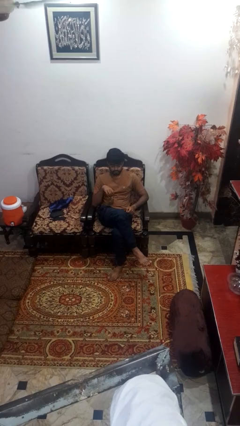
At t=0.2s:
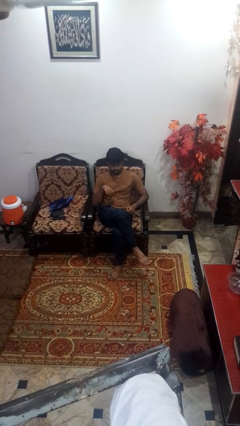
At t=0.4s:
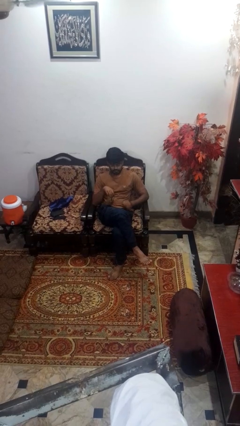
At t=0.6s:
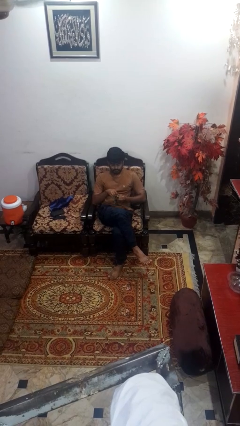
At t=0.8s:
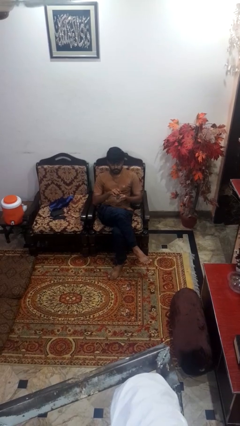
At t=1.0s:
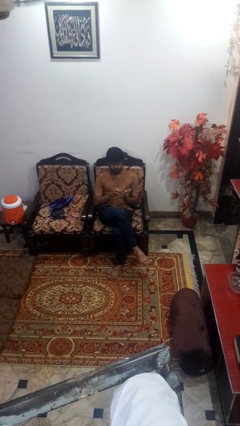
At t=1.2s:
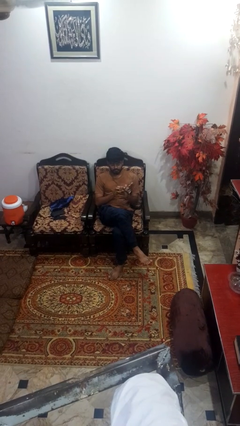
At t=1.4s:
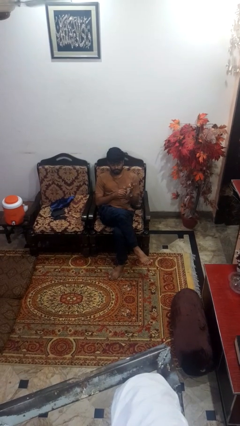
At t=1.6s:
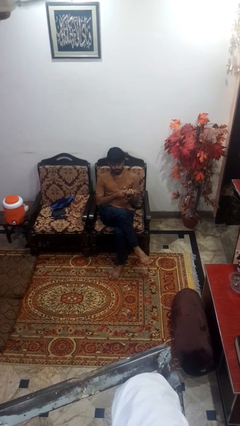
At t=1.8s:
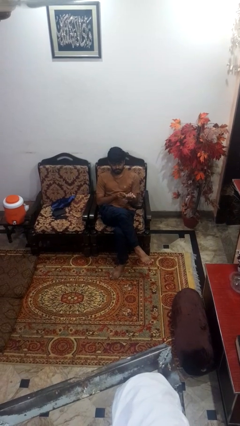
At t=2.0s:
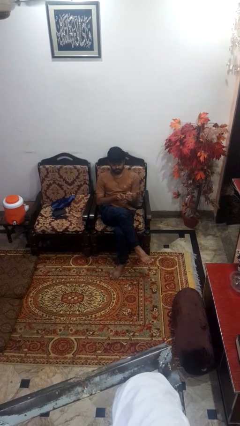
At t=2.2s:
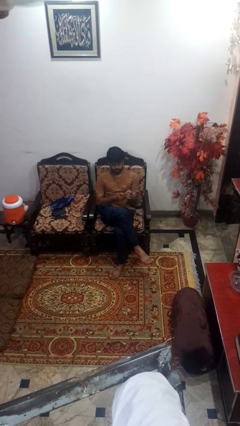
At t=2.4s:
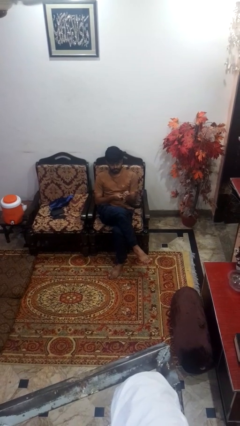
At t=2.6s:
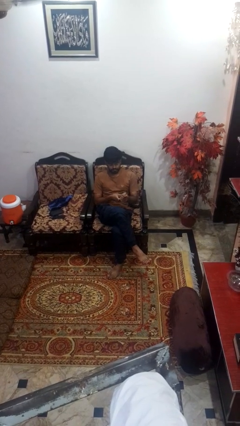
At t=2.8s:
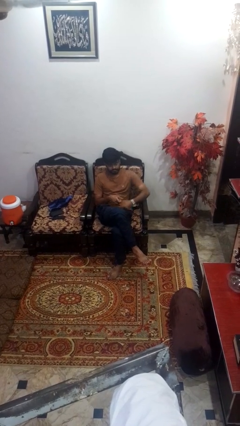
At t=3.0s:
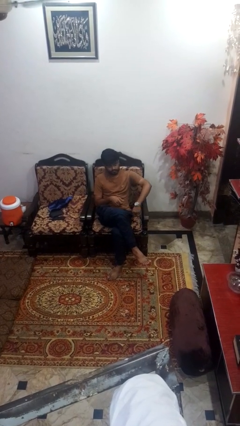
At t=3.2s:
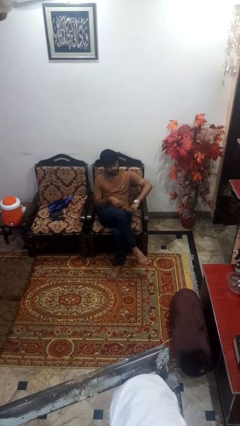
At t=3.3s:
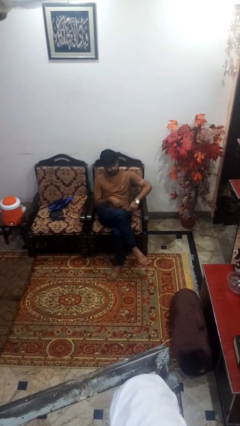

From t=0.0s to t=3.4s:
person puts on wristwatch

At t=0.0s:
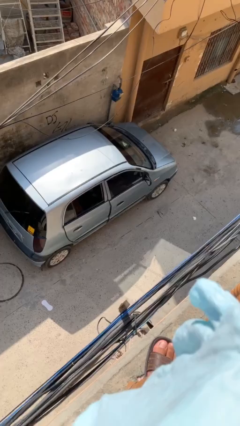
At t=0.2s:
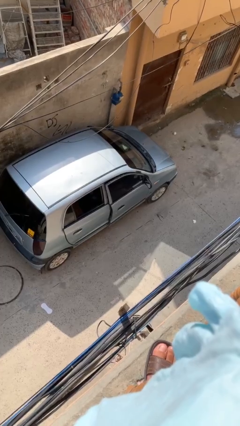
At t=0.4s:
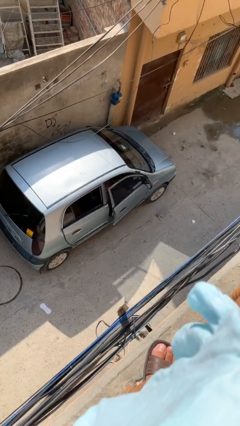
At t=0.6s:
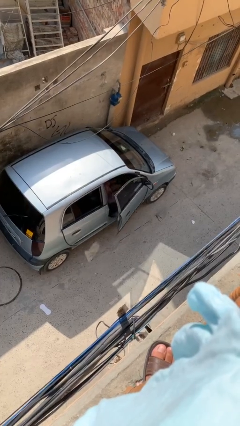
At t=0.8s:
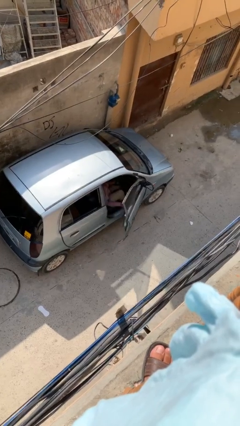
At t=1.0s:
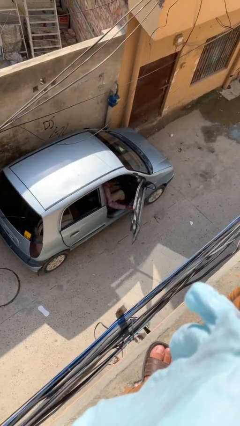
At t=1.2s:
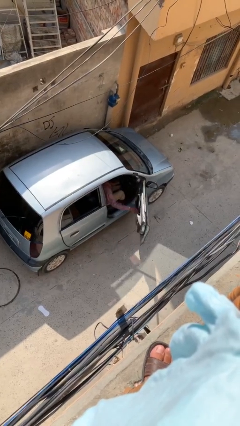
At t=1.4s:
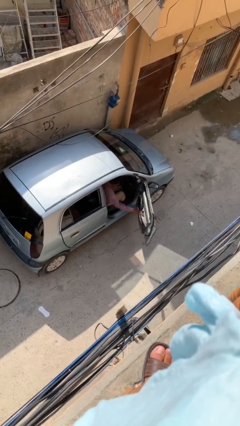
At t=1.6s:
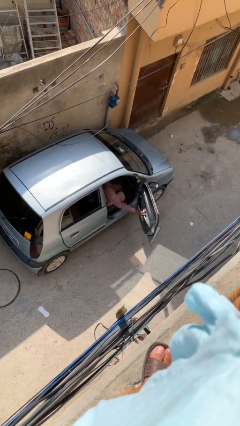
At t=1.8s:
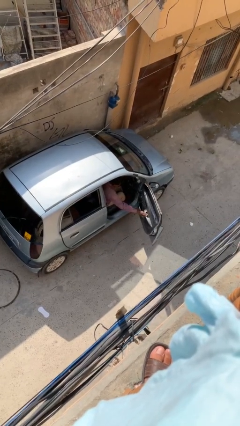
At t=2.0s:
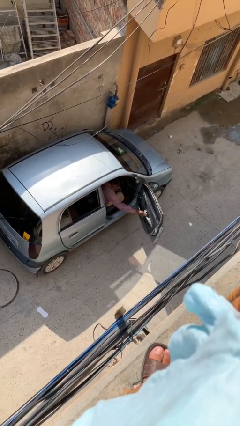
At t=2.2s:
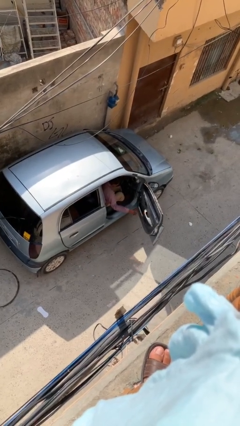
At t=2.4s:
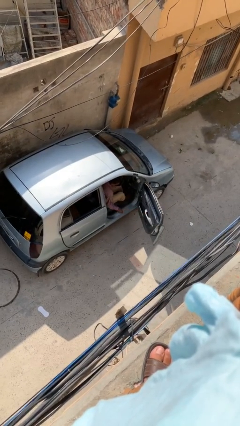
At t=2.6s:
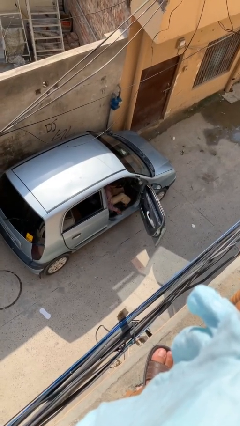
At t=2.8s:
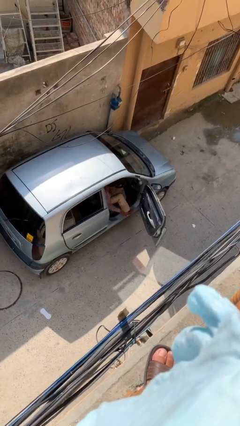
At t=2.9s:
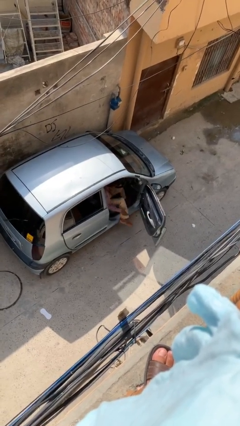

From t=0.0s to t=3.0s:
person opens car door

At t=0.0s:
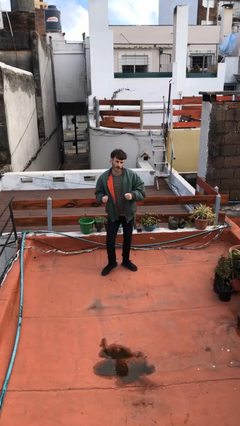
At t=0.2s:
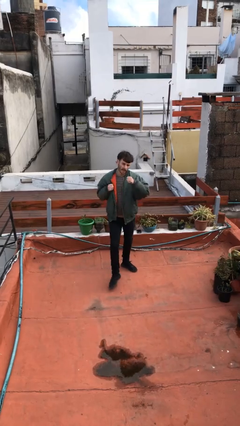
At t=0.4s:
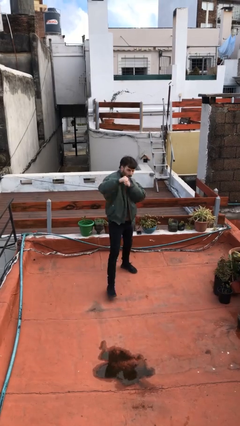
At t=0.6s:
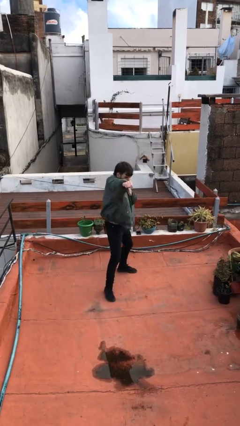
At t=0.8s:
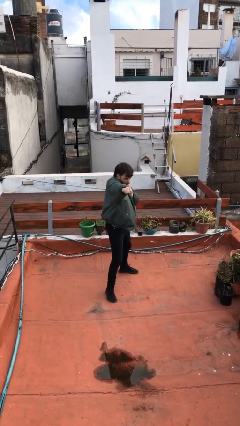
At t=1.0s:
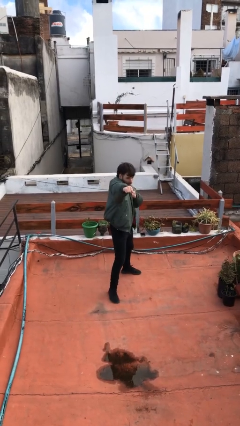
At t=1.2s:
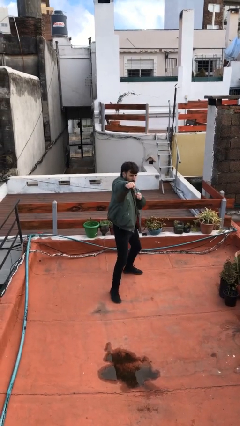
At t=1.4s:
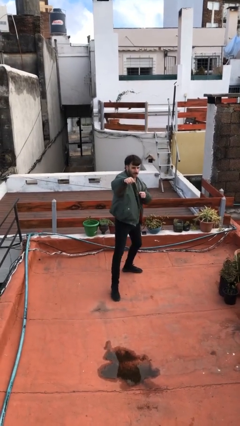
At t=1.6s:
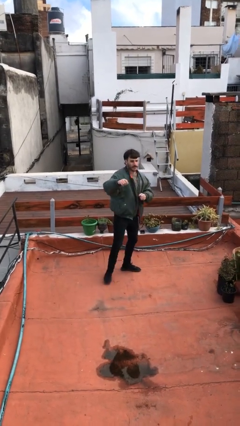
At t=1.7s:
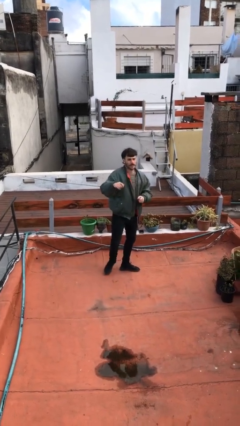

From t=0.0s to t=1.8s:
person punches

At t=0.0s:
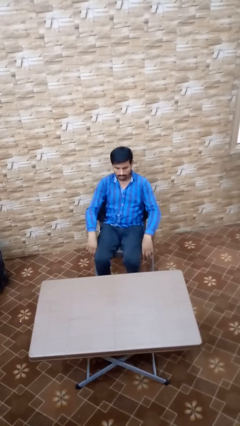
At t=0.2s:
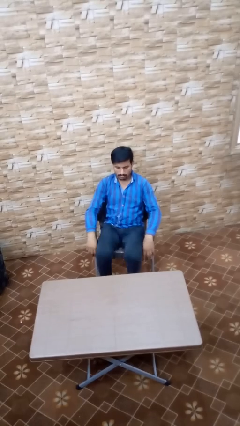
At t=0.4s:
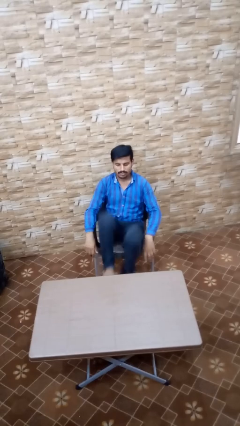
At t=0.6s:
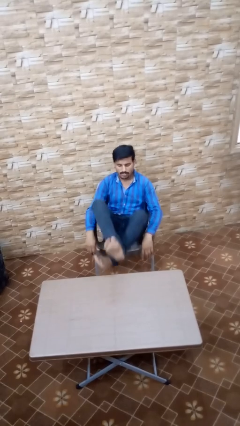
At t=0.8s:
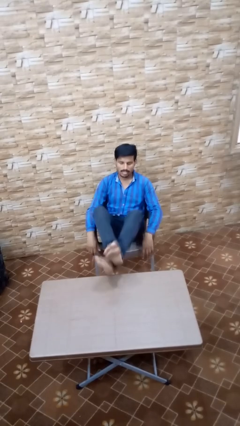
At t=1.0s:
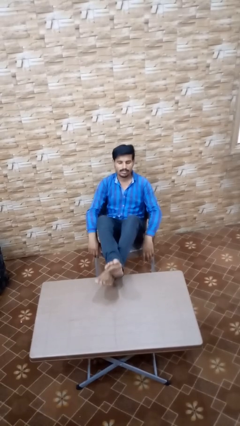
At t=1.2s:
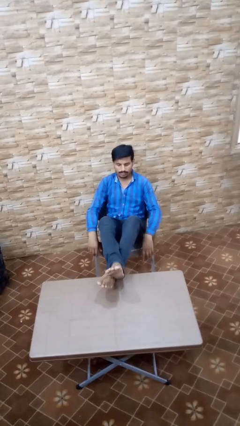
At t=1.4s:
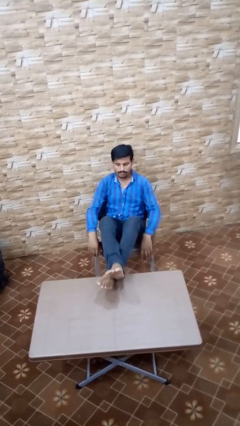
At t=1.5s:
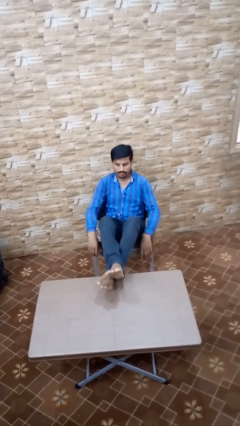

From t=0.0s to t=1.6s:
person puts feet up

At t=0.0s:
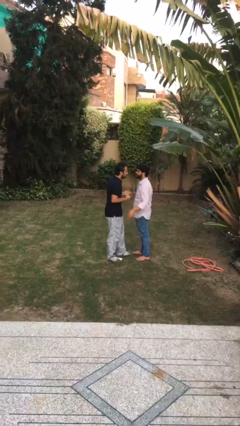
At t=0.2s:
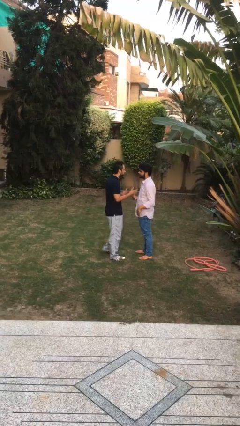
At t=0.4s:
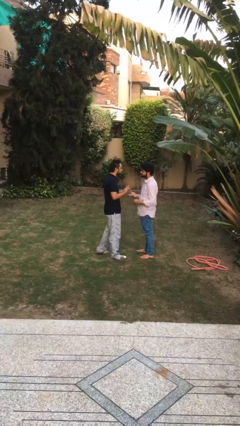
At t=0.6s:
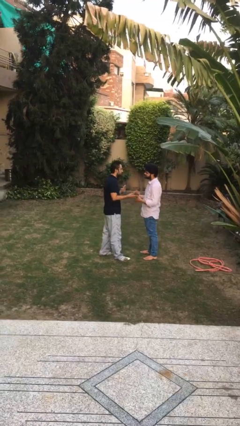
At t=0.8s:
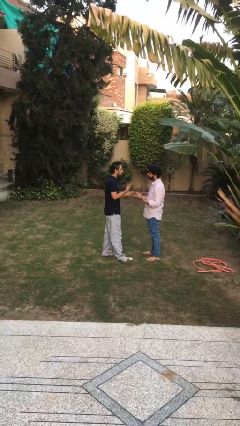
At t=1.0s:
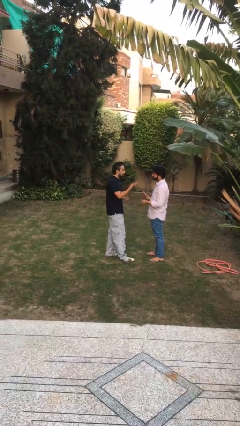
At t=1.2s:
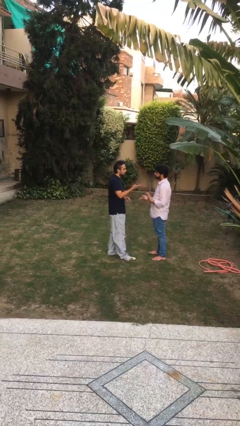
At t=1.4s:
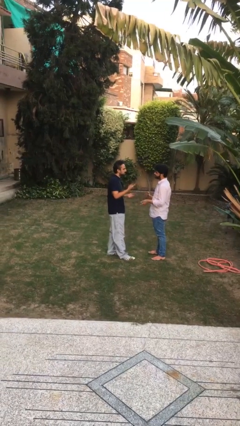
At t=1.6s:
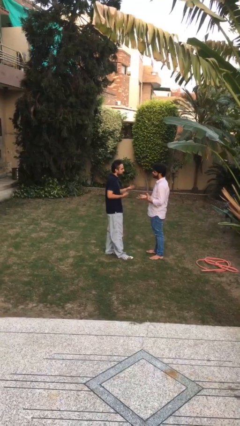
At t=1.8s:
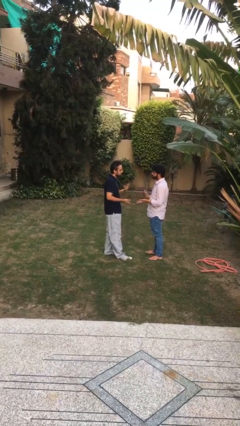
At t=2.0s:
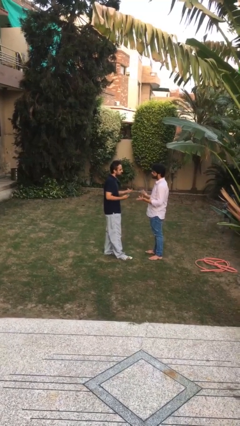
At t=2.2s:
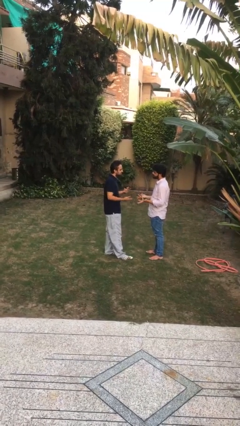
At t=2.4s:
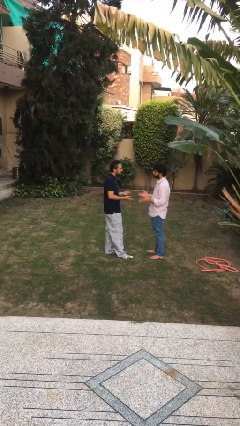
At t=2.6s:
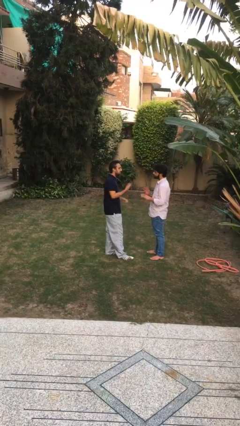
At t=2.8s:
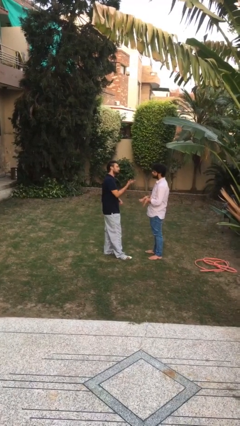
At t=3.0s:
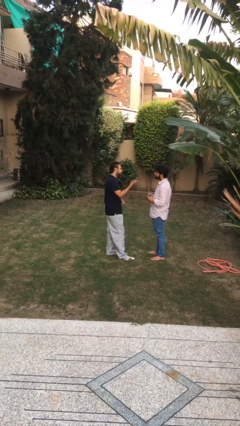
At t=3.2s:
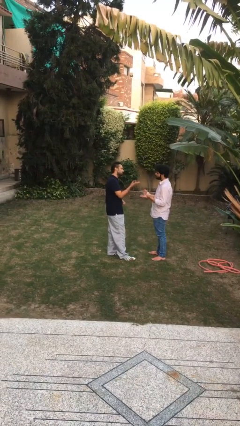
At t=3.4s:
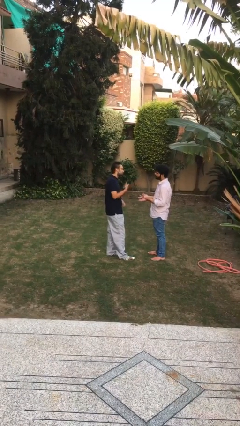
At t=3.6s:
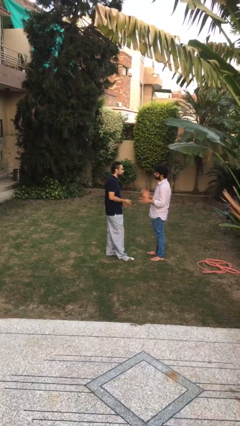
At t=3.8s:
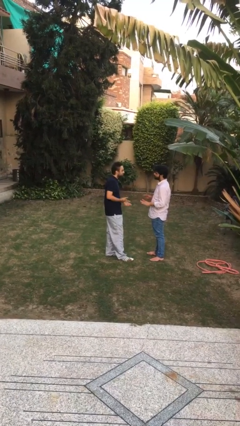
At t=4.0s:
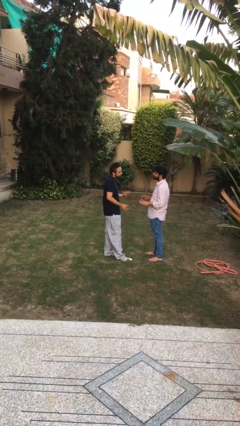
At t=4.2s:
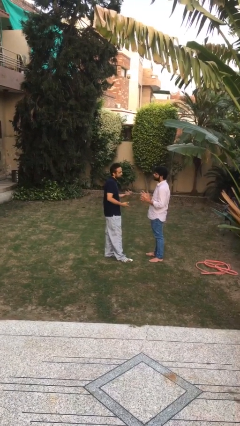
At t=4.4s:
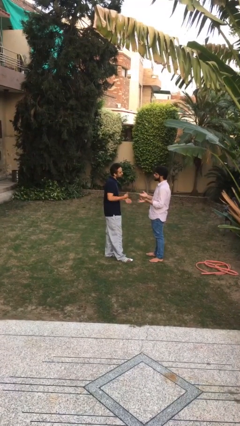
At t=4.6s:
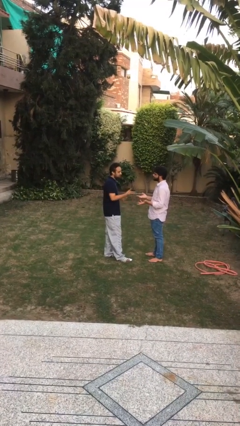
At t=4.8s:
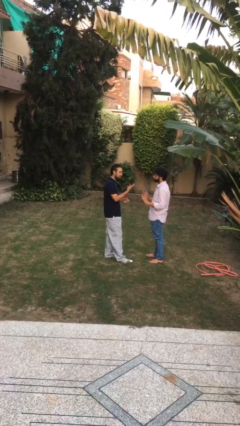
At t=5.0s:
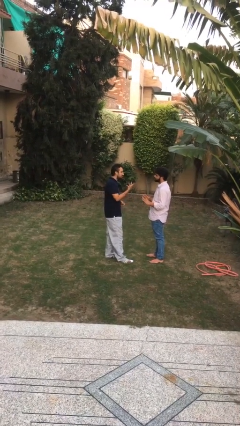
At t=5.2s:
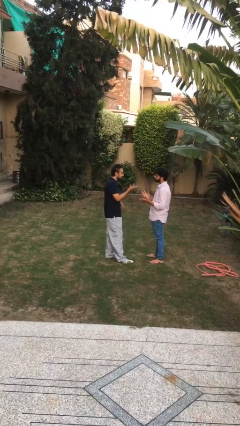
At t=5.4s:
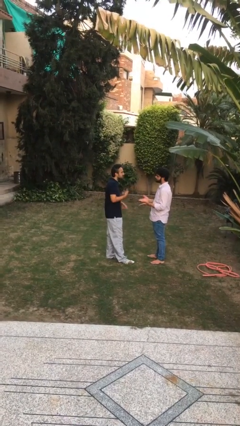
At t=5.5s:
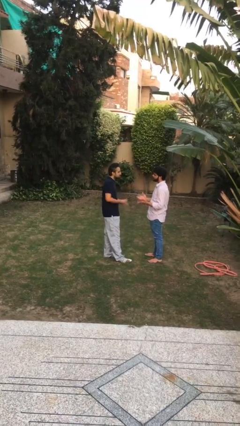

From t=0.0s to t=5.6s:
person talks to person

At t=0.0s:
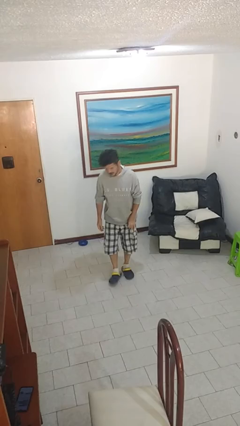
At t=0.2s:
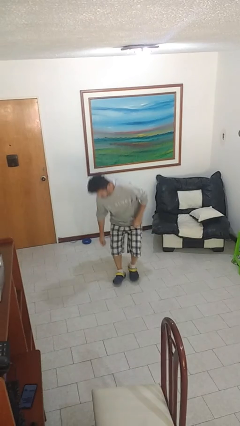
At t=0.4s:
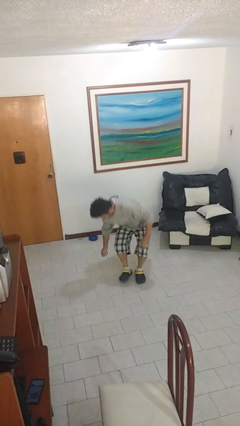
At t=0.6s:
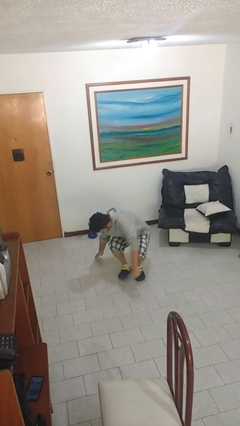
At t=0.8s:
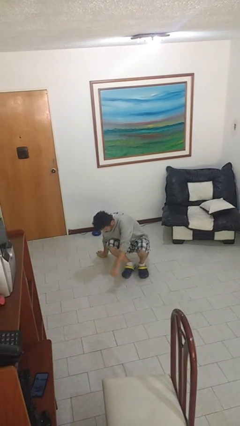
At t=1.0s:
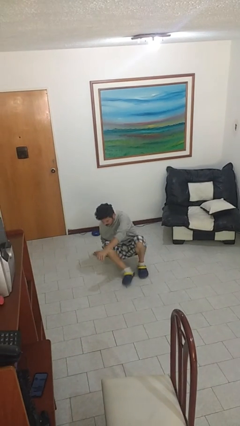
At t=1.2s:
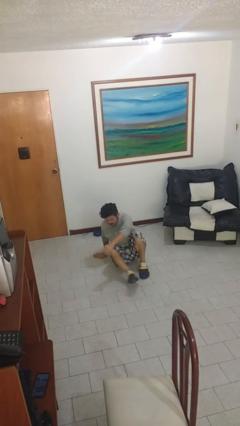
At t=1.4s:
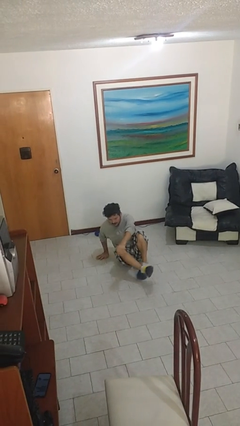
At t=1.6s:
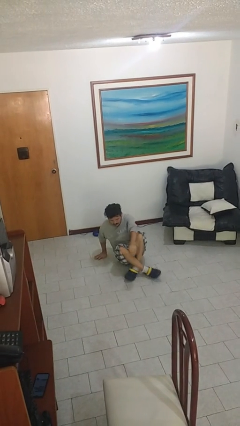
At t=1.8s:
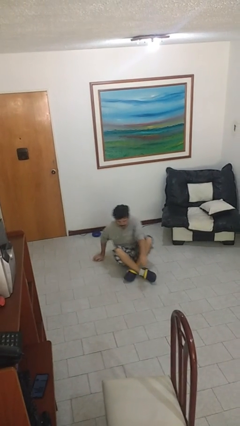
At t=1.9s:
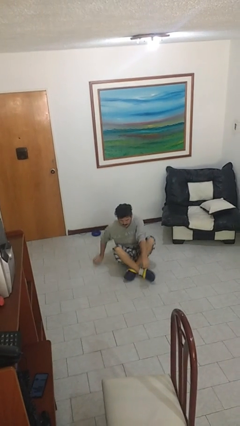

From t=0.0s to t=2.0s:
person sits crisscross
